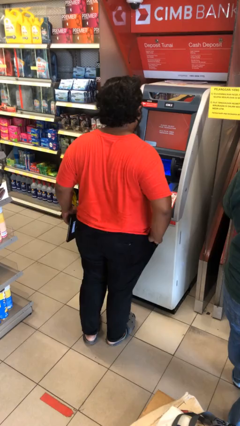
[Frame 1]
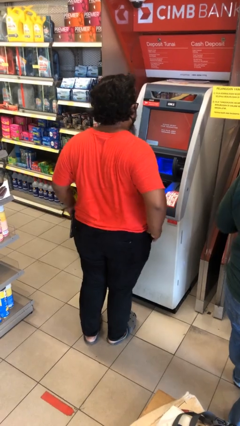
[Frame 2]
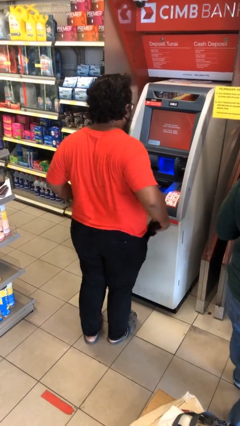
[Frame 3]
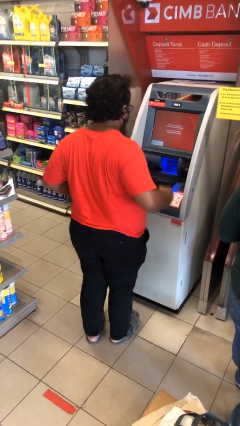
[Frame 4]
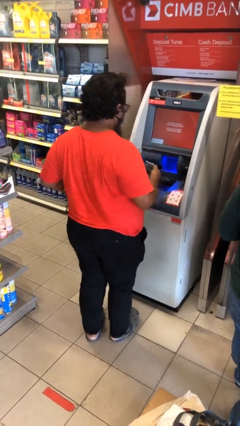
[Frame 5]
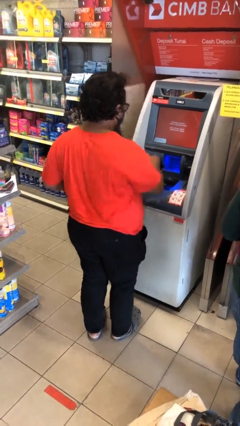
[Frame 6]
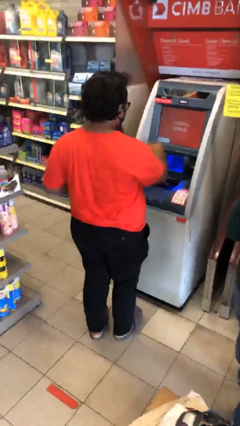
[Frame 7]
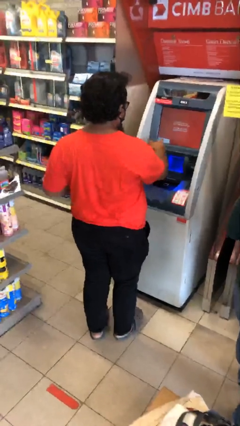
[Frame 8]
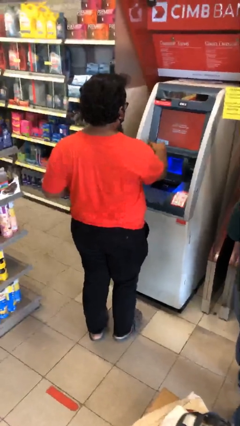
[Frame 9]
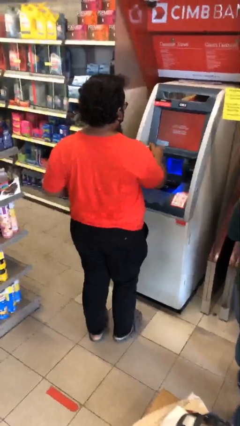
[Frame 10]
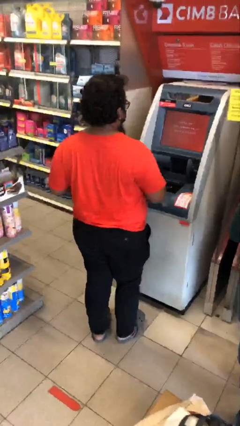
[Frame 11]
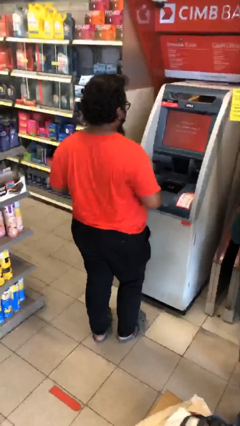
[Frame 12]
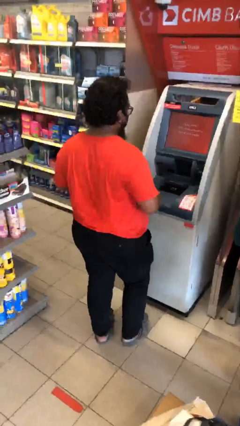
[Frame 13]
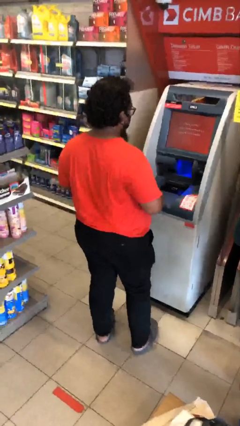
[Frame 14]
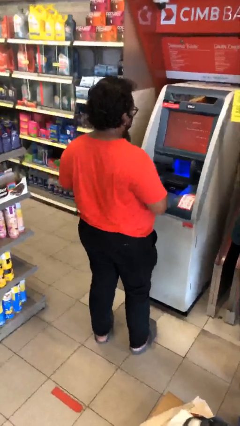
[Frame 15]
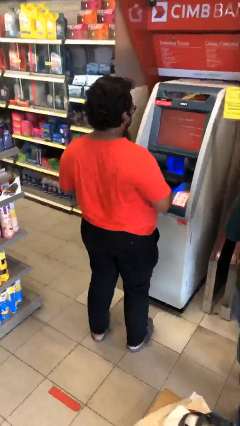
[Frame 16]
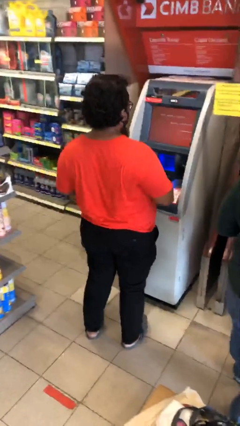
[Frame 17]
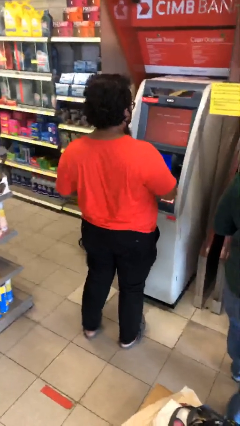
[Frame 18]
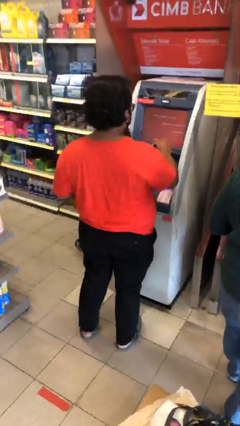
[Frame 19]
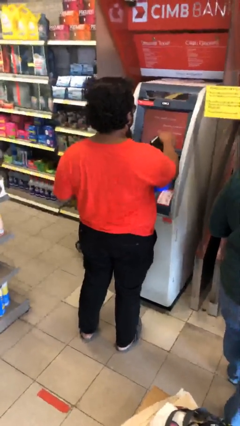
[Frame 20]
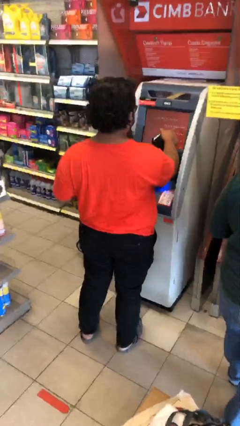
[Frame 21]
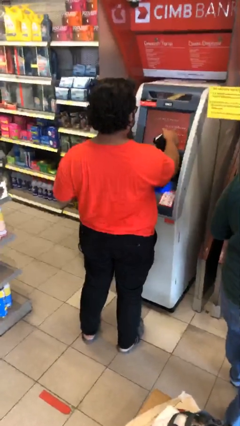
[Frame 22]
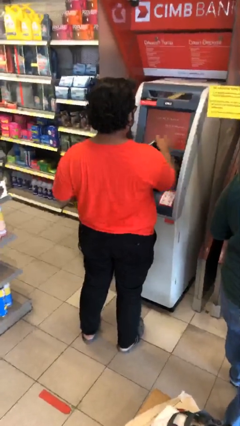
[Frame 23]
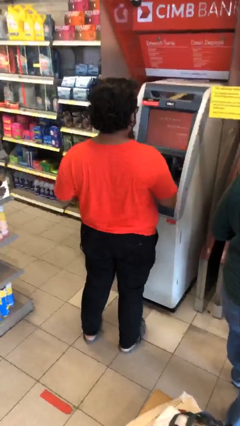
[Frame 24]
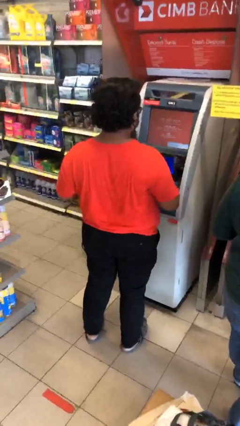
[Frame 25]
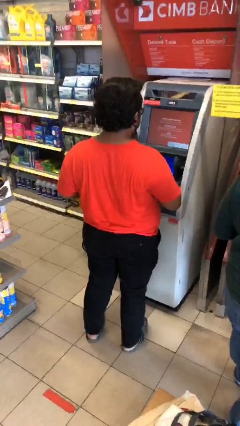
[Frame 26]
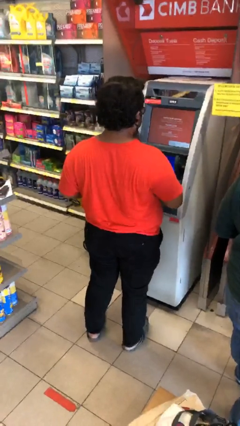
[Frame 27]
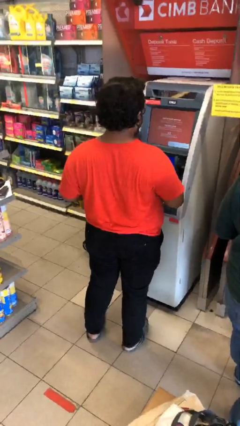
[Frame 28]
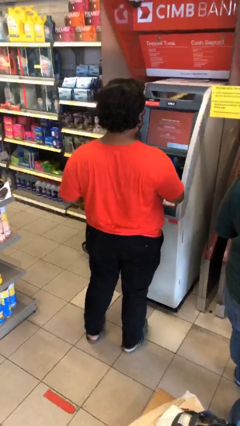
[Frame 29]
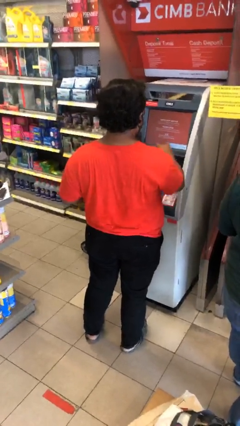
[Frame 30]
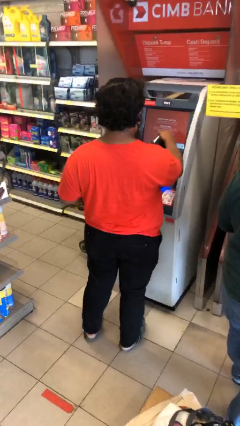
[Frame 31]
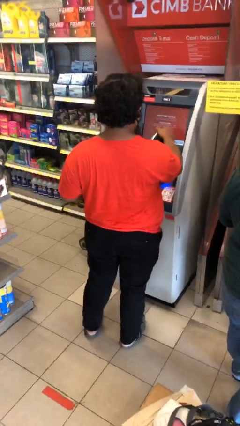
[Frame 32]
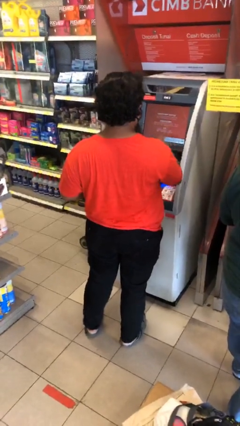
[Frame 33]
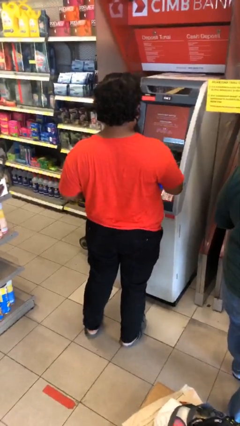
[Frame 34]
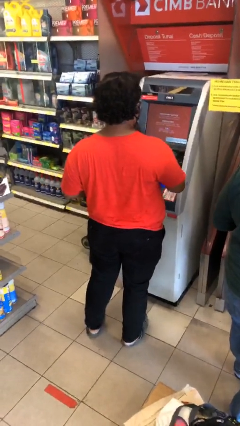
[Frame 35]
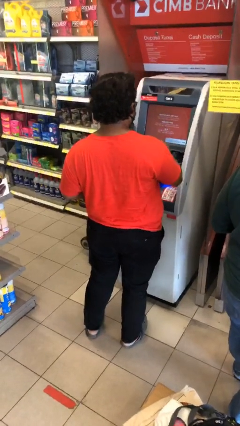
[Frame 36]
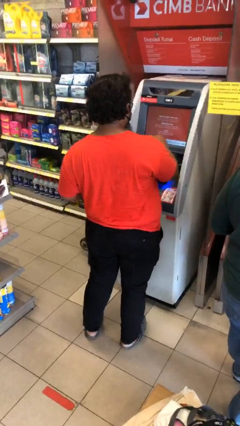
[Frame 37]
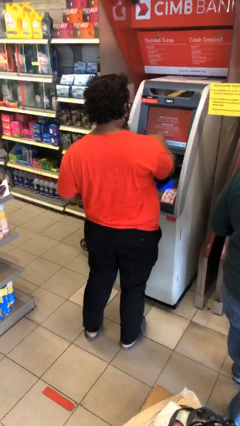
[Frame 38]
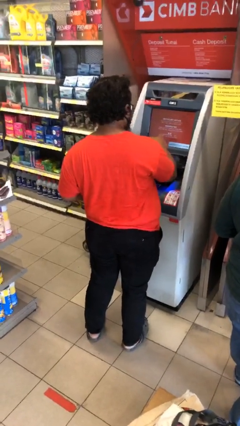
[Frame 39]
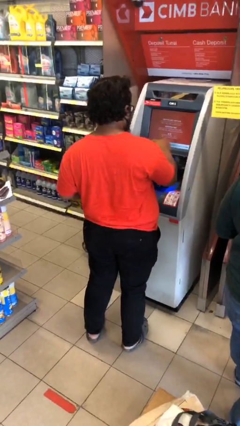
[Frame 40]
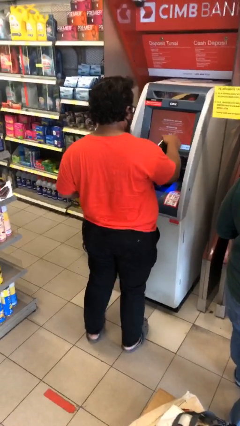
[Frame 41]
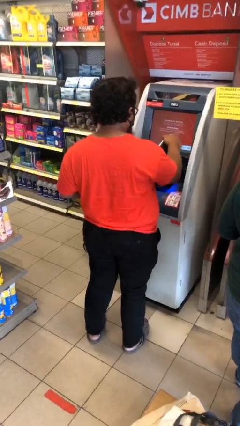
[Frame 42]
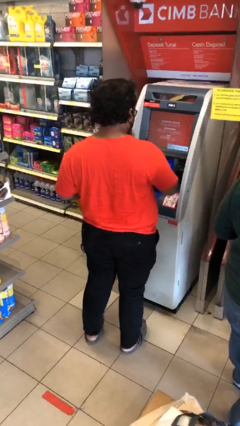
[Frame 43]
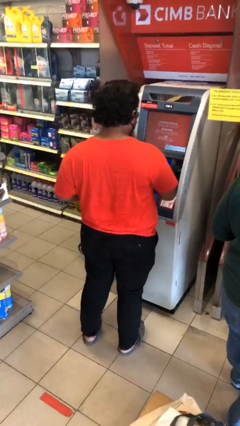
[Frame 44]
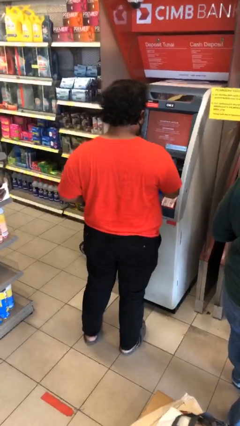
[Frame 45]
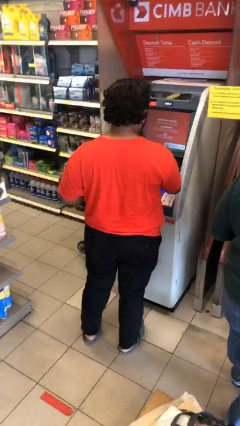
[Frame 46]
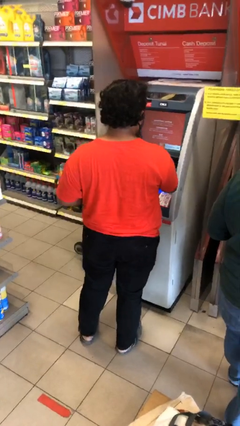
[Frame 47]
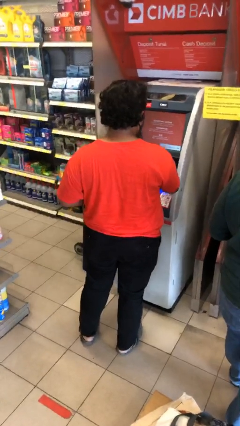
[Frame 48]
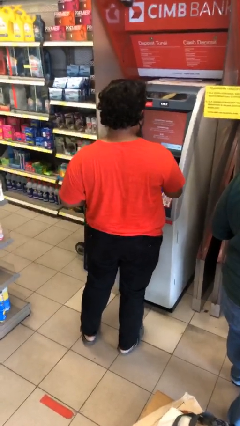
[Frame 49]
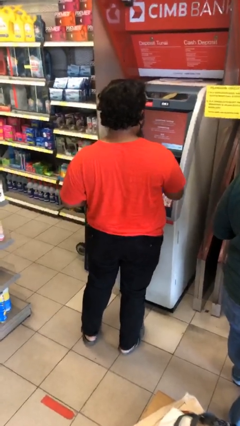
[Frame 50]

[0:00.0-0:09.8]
person purchases from machine

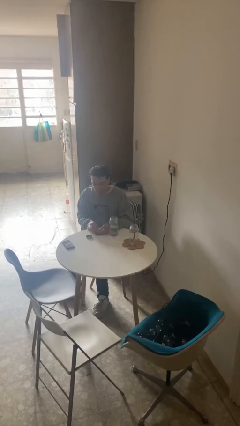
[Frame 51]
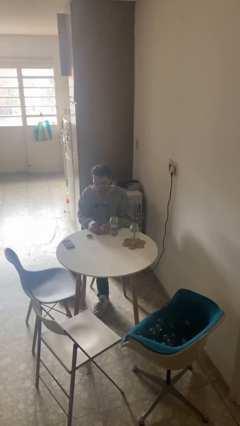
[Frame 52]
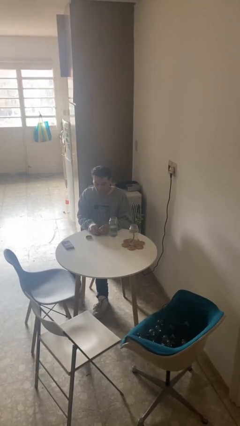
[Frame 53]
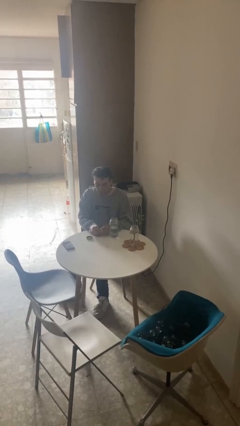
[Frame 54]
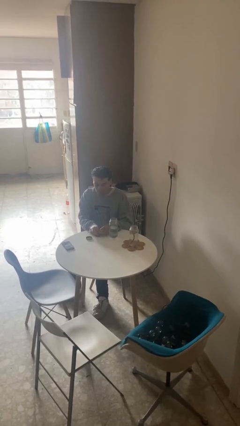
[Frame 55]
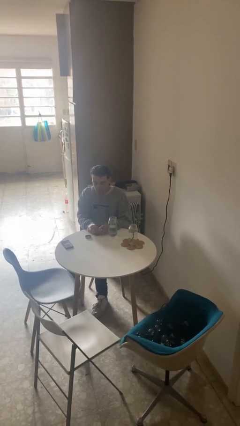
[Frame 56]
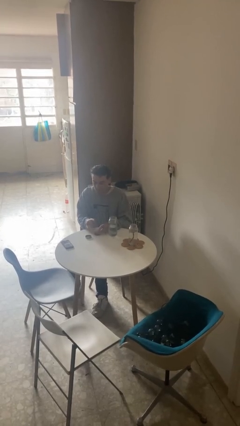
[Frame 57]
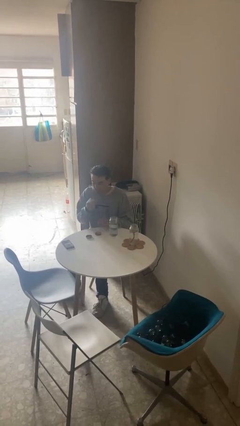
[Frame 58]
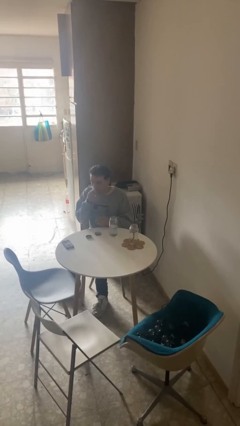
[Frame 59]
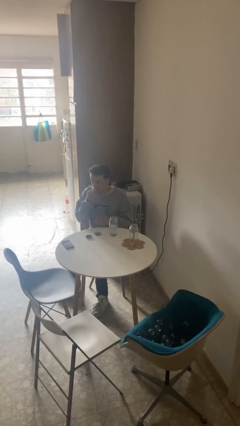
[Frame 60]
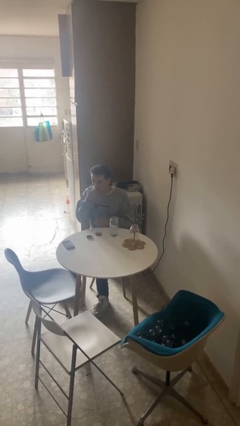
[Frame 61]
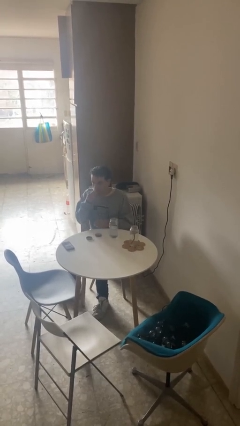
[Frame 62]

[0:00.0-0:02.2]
person takes medicine pills

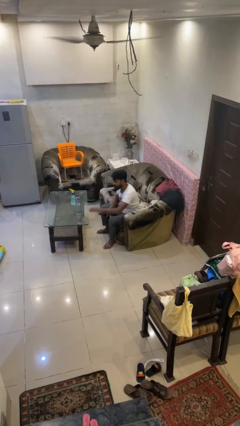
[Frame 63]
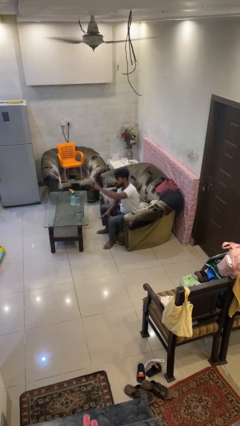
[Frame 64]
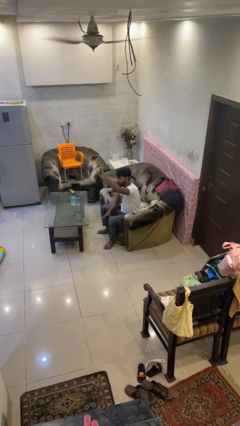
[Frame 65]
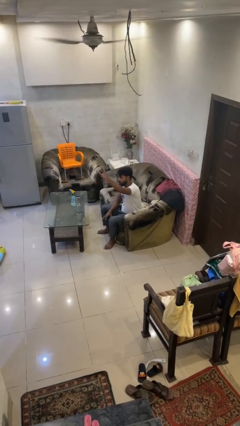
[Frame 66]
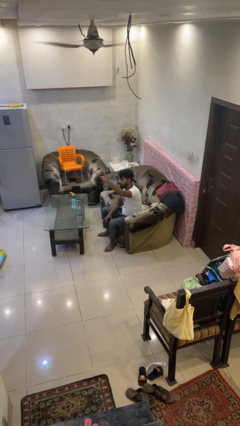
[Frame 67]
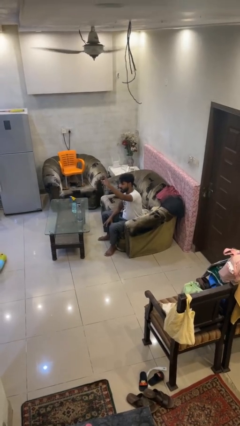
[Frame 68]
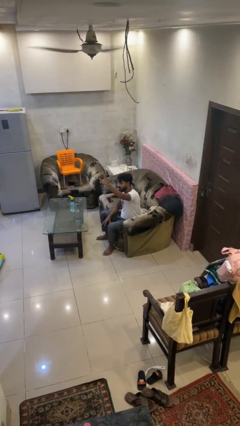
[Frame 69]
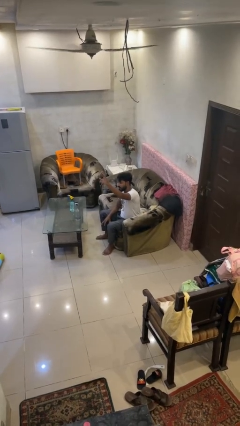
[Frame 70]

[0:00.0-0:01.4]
person gestures raise hand

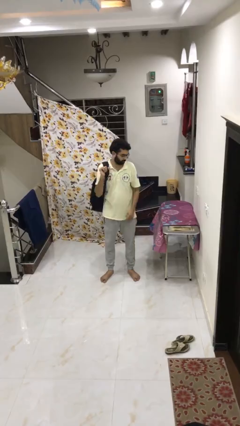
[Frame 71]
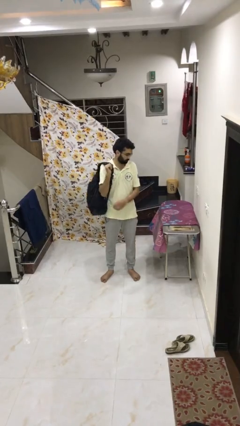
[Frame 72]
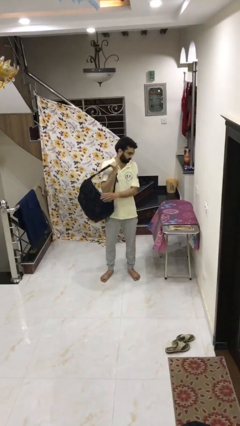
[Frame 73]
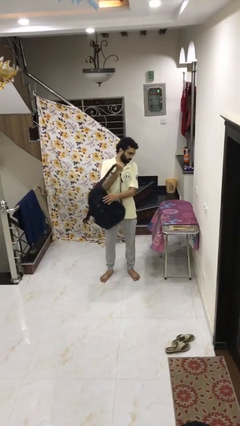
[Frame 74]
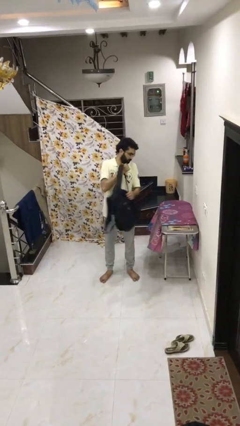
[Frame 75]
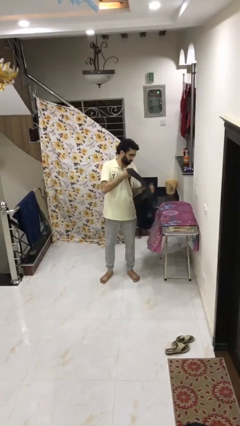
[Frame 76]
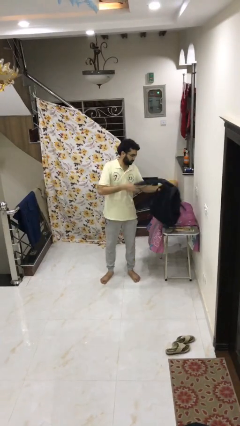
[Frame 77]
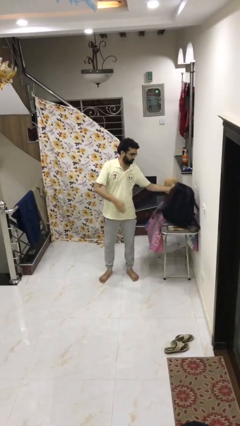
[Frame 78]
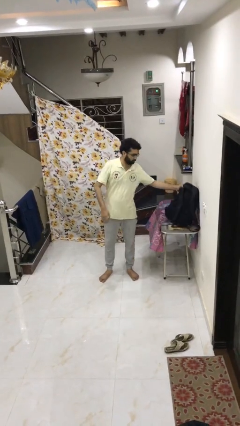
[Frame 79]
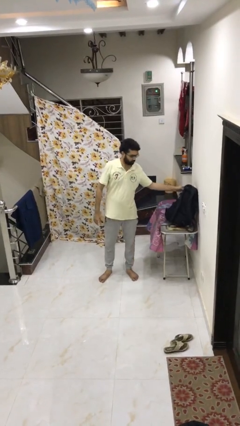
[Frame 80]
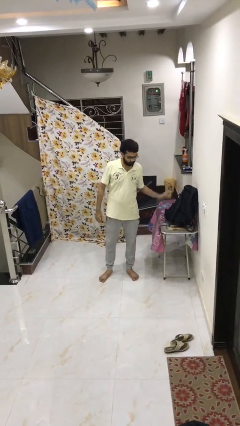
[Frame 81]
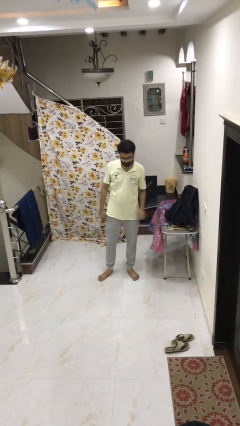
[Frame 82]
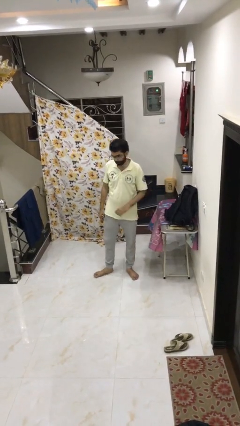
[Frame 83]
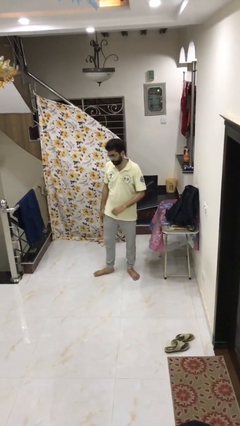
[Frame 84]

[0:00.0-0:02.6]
person puts down object on table

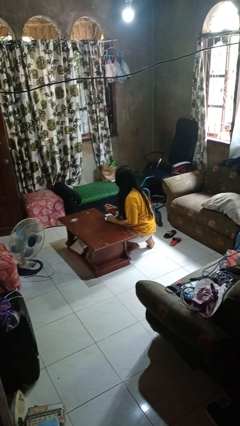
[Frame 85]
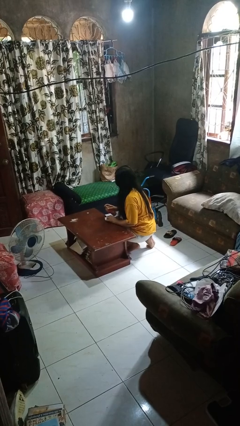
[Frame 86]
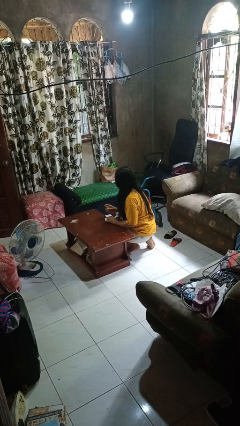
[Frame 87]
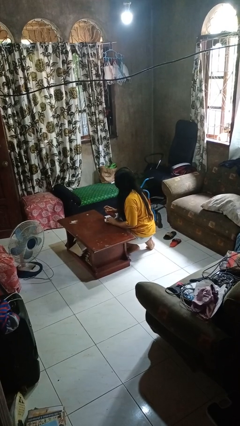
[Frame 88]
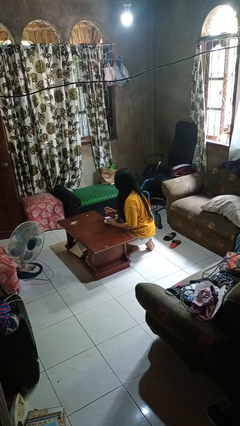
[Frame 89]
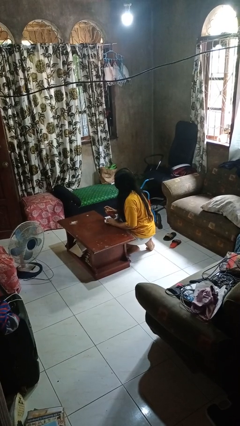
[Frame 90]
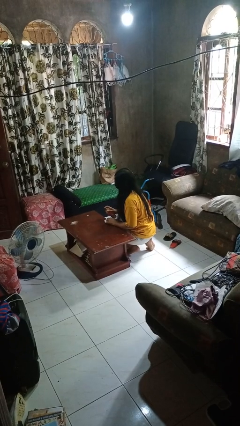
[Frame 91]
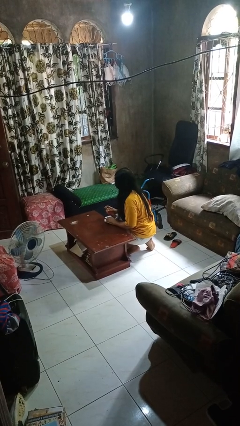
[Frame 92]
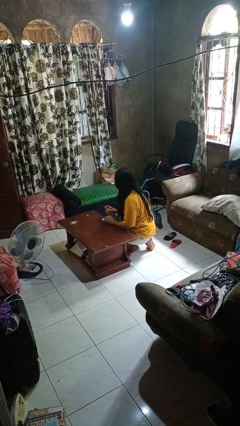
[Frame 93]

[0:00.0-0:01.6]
person sprays from bottle
